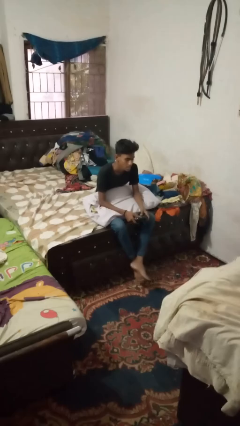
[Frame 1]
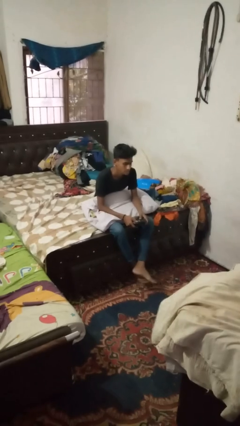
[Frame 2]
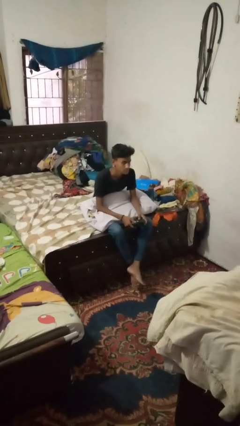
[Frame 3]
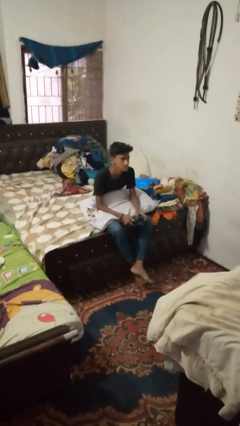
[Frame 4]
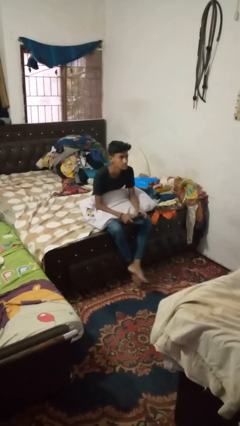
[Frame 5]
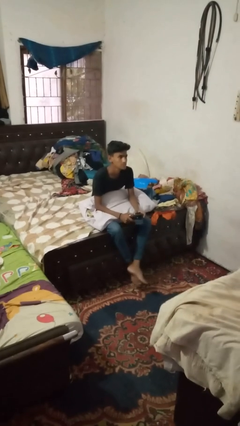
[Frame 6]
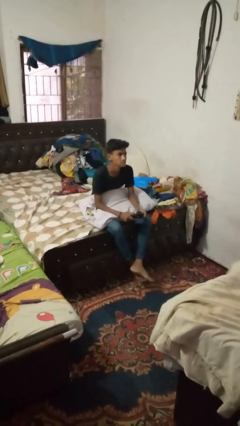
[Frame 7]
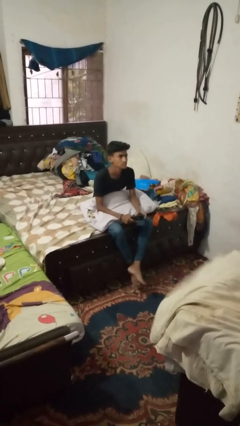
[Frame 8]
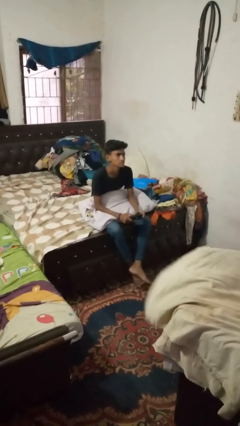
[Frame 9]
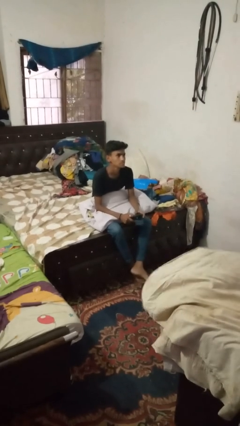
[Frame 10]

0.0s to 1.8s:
person interacts with handheld game

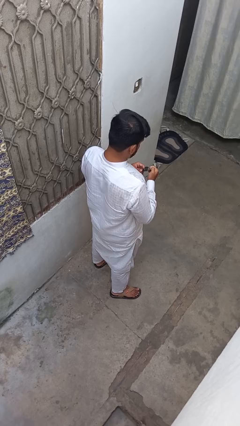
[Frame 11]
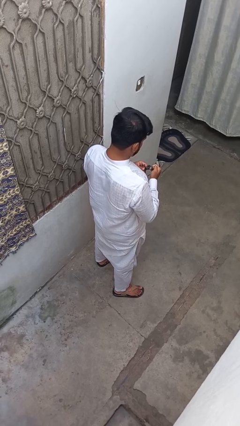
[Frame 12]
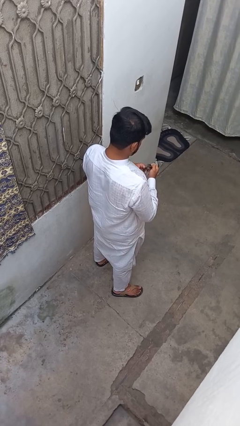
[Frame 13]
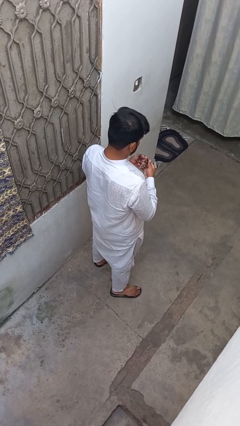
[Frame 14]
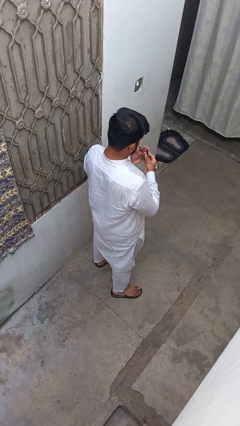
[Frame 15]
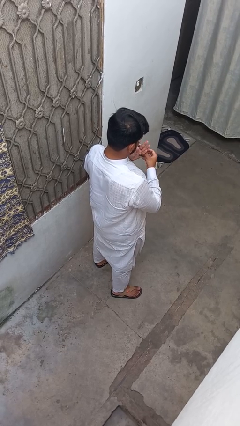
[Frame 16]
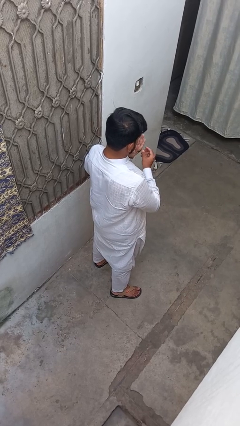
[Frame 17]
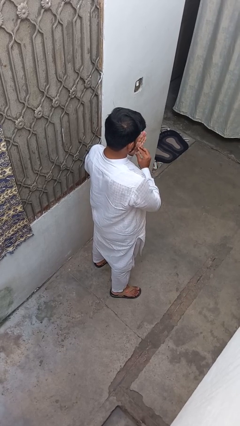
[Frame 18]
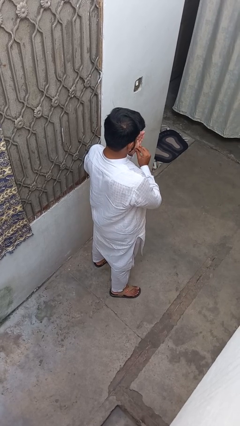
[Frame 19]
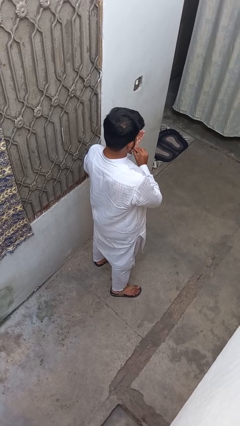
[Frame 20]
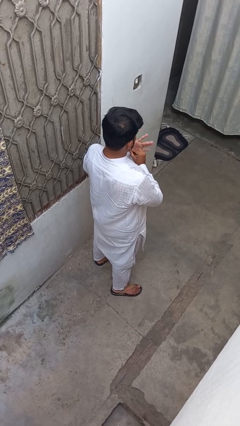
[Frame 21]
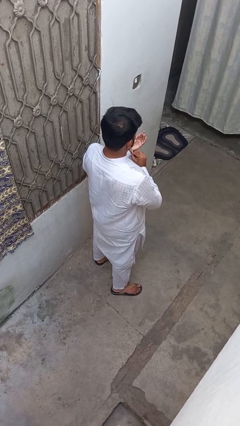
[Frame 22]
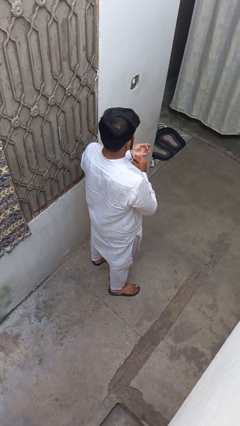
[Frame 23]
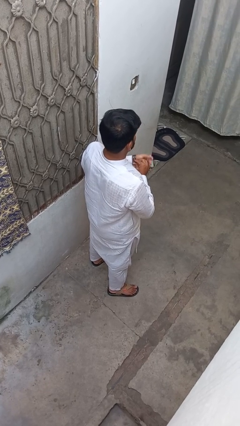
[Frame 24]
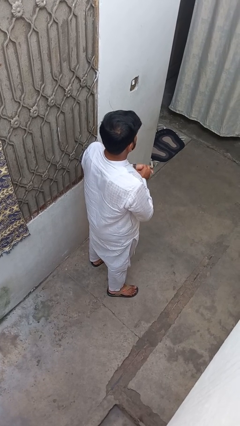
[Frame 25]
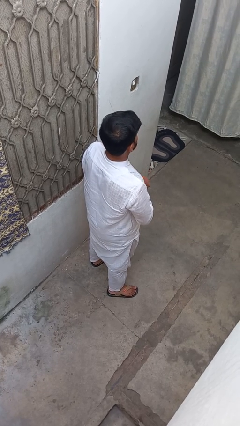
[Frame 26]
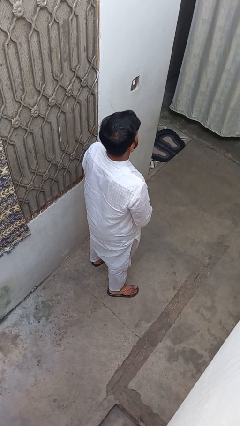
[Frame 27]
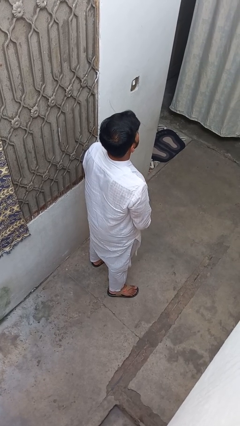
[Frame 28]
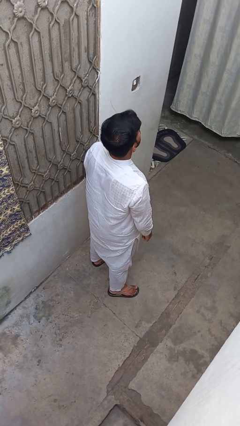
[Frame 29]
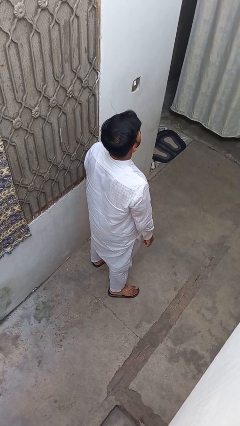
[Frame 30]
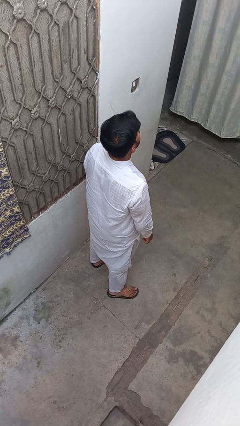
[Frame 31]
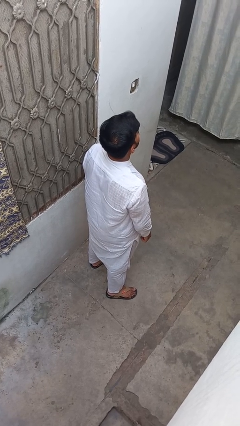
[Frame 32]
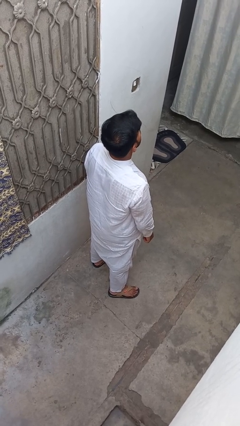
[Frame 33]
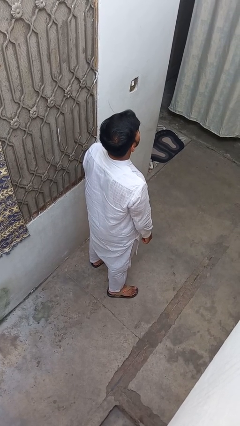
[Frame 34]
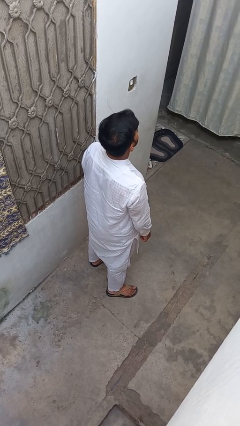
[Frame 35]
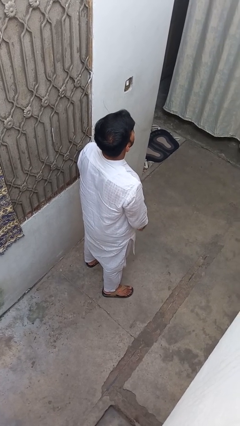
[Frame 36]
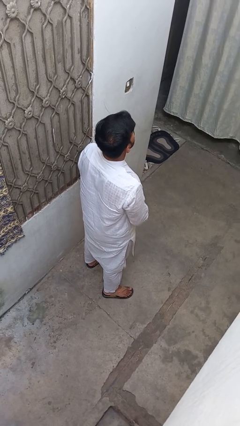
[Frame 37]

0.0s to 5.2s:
person puts on wristwatch

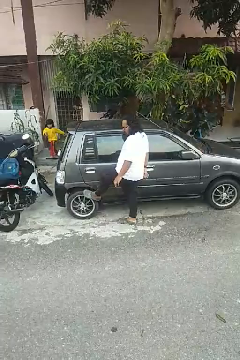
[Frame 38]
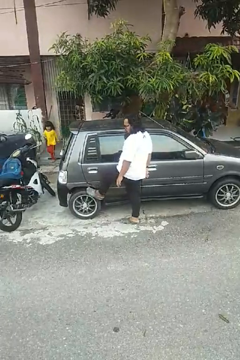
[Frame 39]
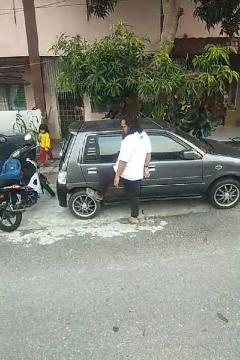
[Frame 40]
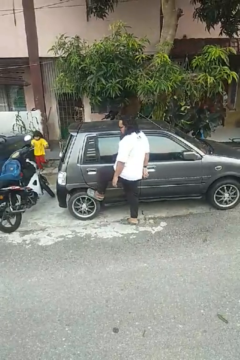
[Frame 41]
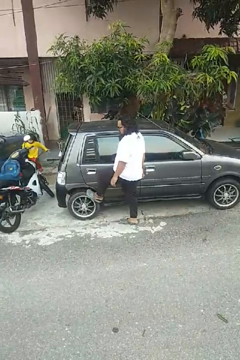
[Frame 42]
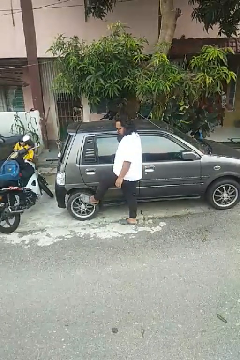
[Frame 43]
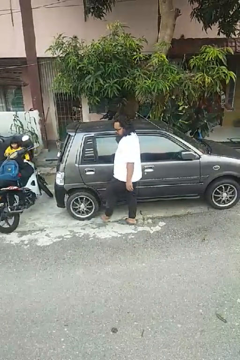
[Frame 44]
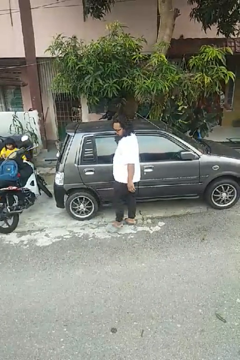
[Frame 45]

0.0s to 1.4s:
person kicks car tires

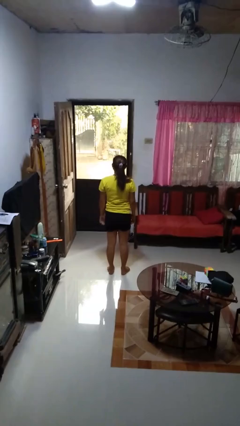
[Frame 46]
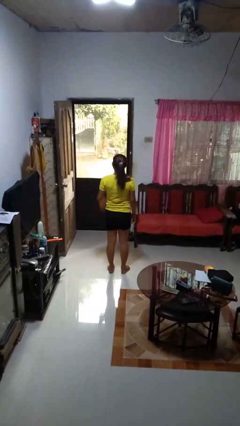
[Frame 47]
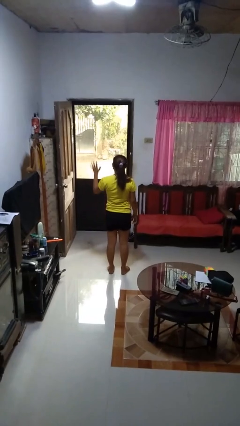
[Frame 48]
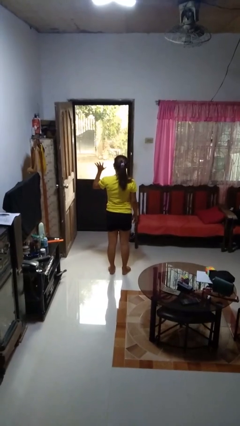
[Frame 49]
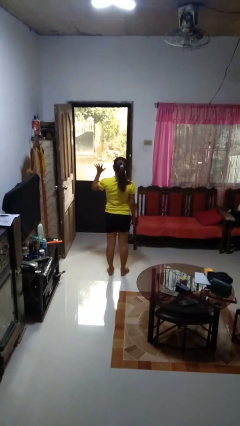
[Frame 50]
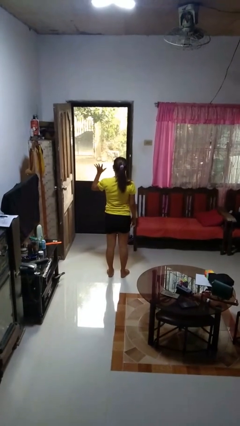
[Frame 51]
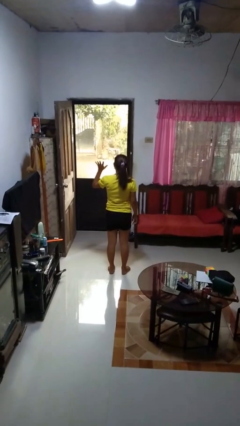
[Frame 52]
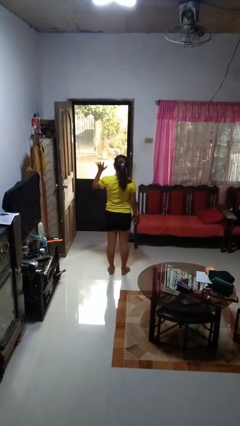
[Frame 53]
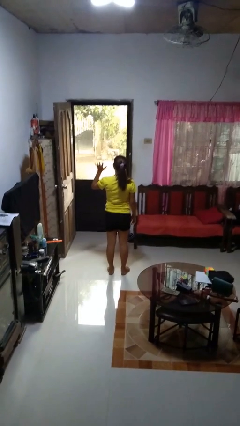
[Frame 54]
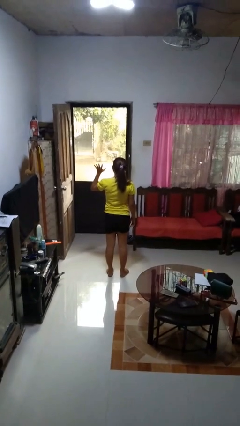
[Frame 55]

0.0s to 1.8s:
person gestures number five

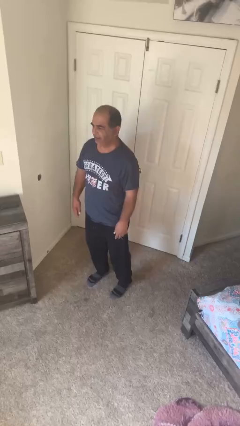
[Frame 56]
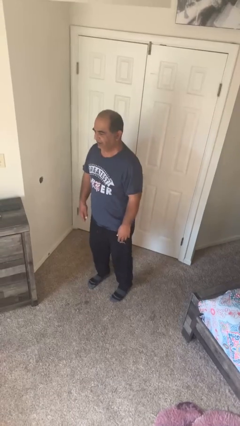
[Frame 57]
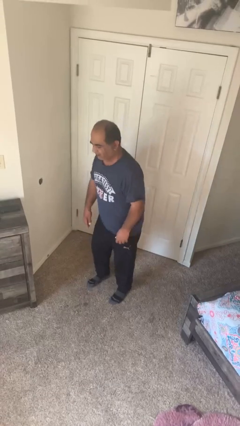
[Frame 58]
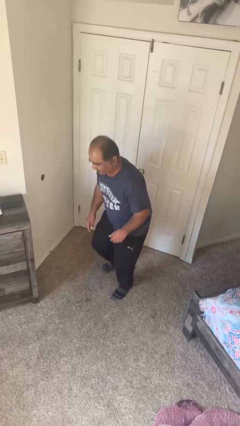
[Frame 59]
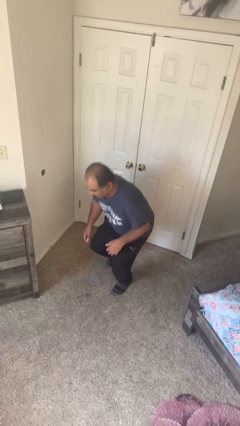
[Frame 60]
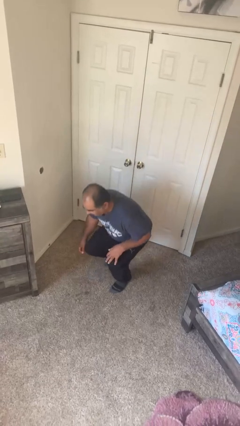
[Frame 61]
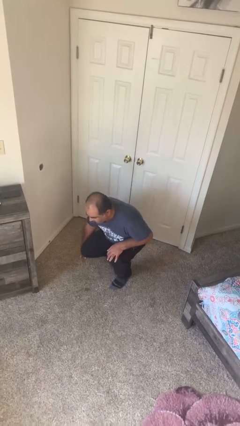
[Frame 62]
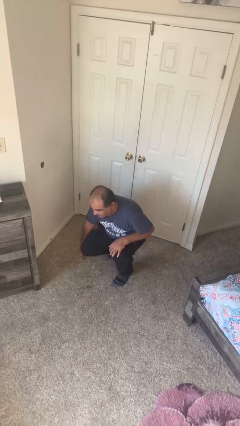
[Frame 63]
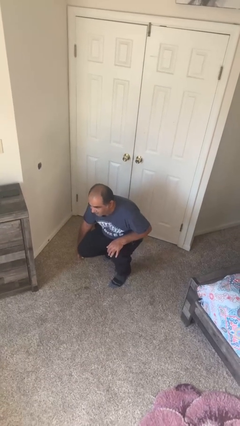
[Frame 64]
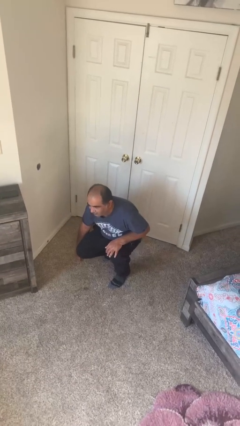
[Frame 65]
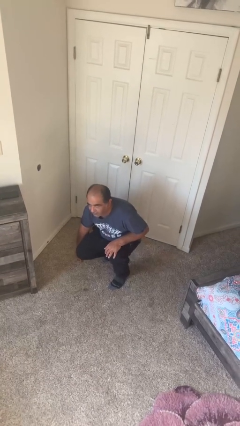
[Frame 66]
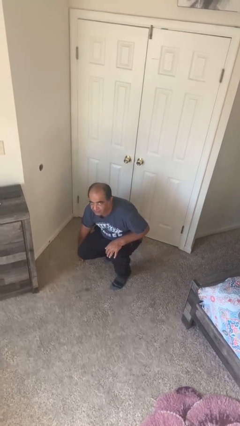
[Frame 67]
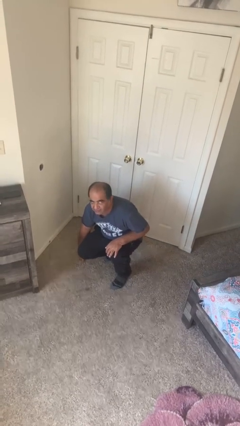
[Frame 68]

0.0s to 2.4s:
person sits down

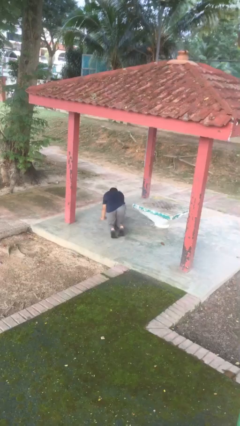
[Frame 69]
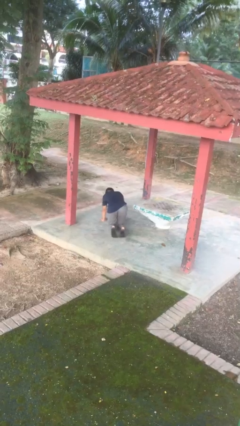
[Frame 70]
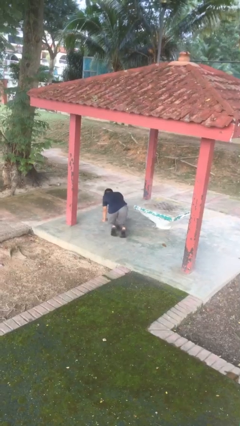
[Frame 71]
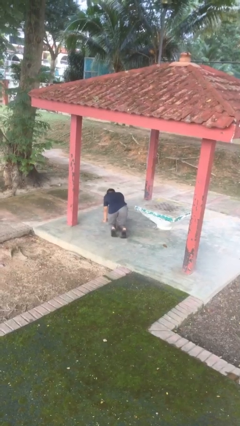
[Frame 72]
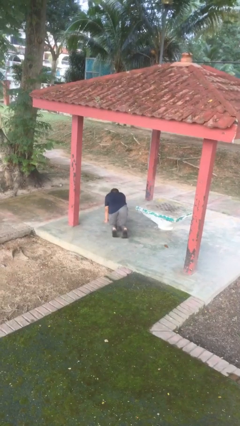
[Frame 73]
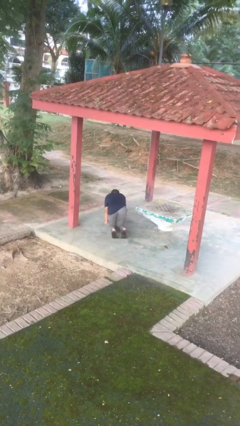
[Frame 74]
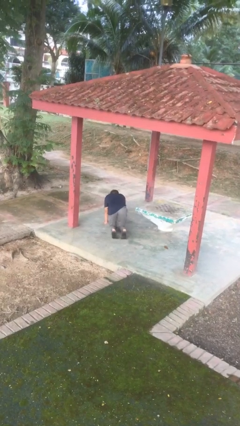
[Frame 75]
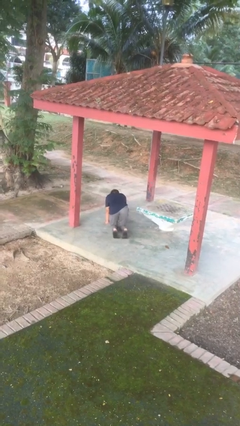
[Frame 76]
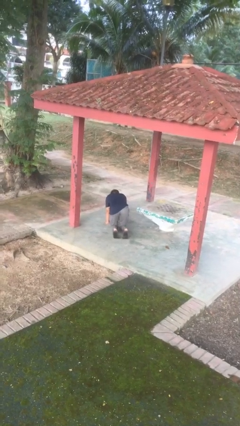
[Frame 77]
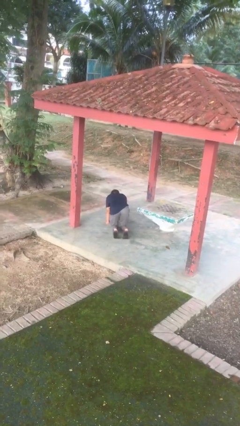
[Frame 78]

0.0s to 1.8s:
person crawls

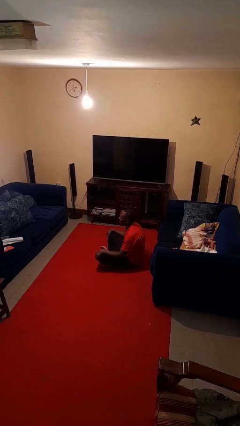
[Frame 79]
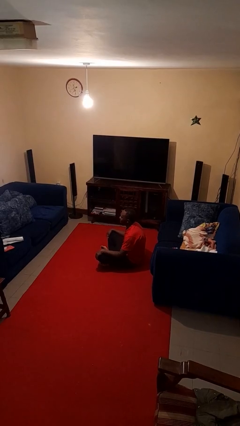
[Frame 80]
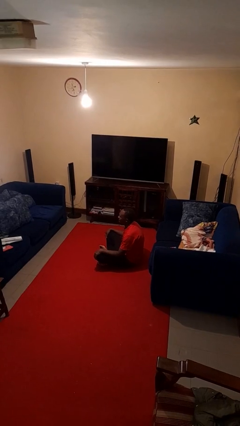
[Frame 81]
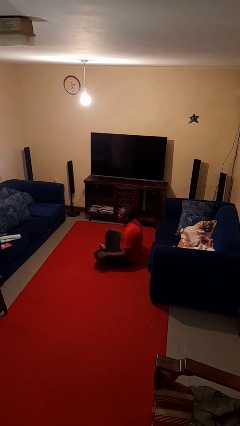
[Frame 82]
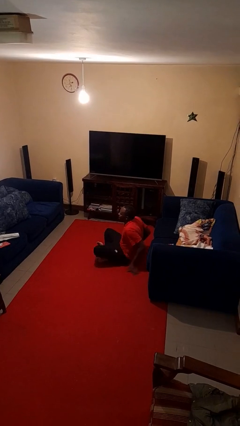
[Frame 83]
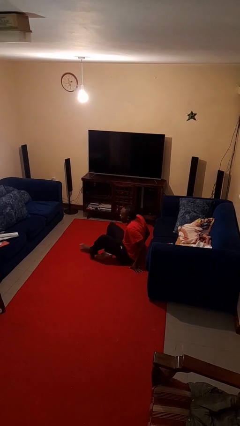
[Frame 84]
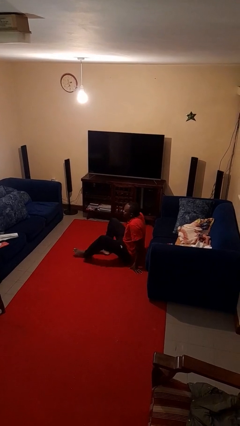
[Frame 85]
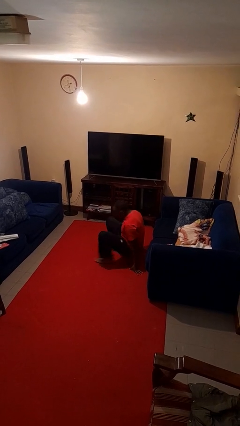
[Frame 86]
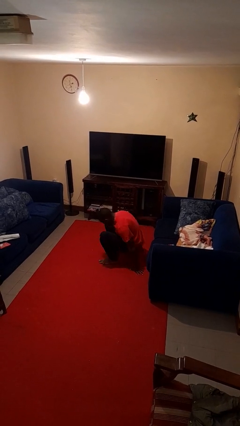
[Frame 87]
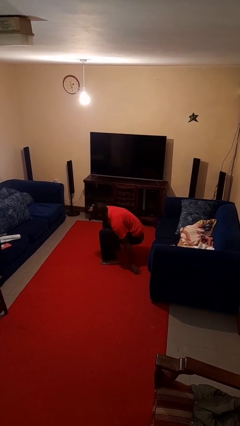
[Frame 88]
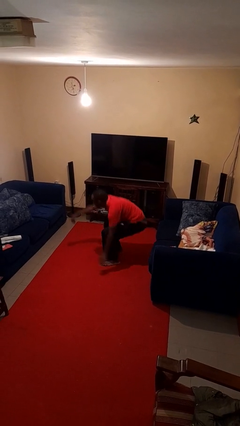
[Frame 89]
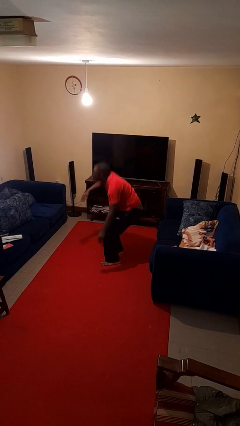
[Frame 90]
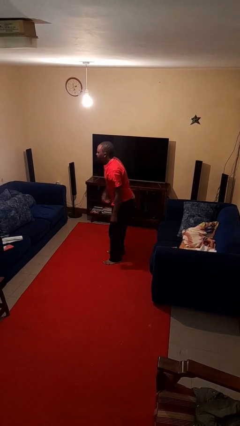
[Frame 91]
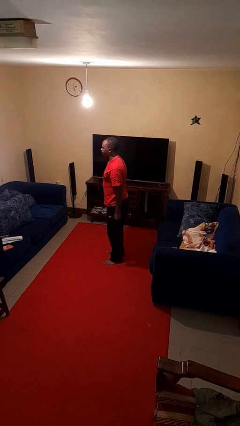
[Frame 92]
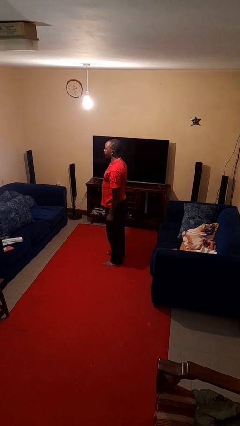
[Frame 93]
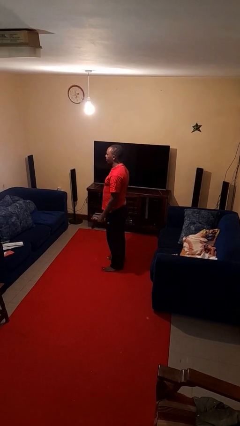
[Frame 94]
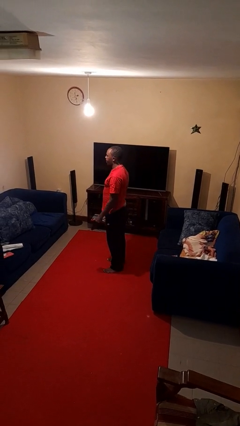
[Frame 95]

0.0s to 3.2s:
person stands up from floor
